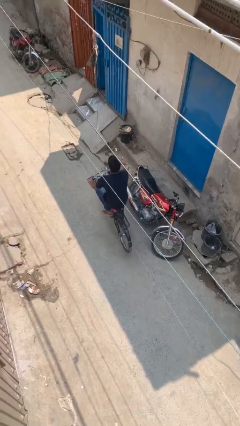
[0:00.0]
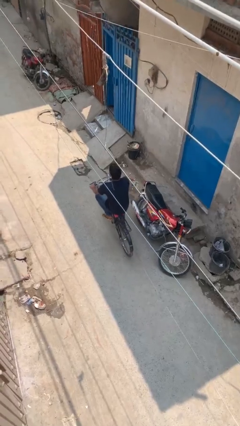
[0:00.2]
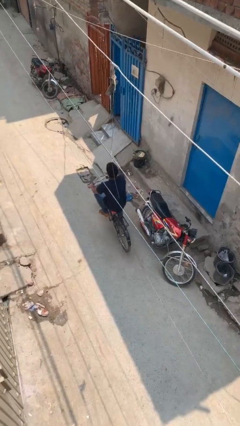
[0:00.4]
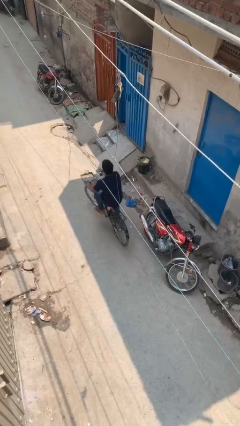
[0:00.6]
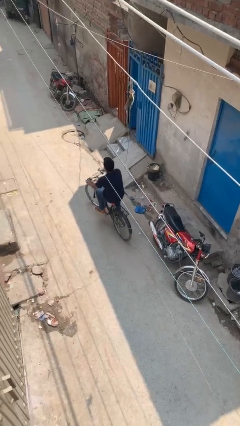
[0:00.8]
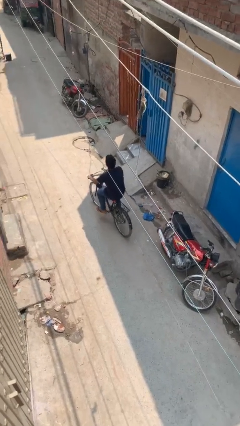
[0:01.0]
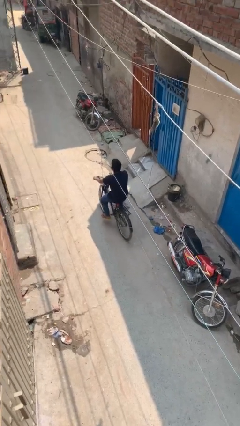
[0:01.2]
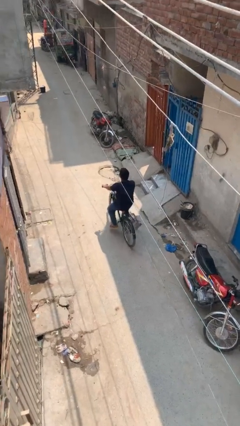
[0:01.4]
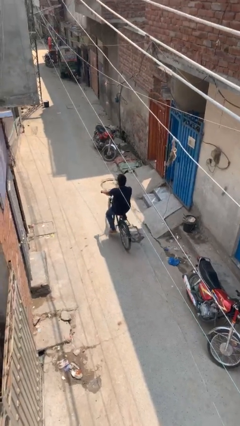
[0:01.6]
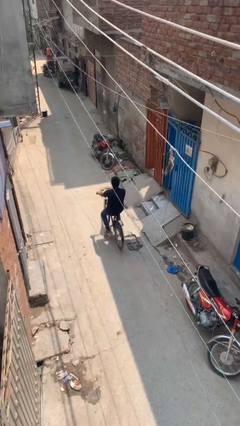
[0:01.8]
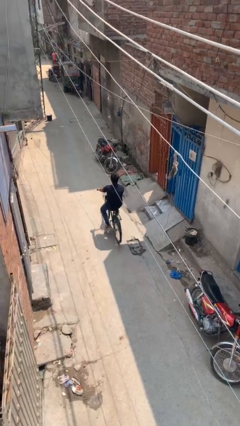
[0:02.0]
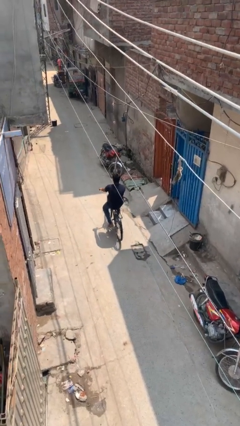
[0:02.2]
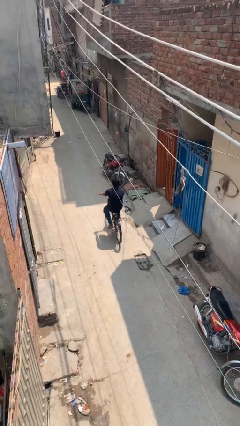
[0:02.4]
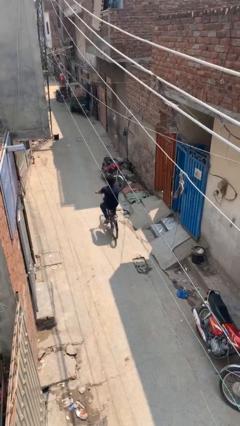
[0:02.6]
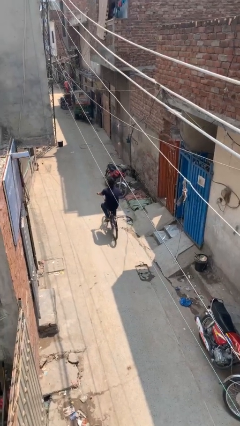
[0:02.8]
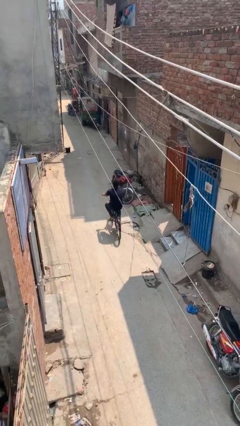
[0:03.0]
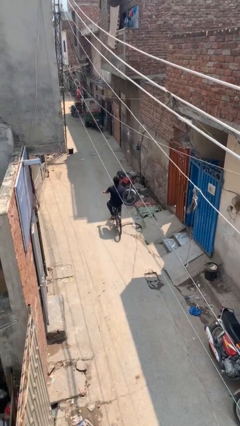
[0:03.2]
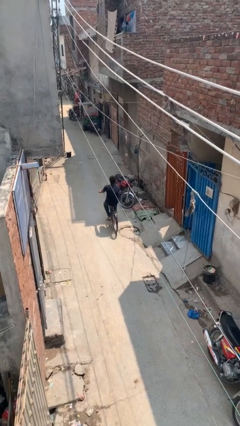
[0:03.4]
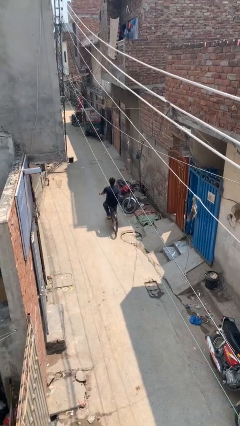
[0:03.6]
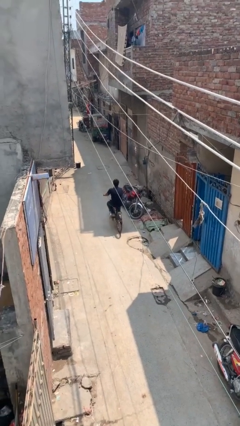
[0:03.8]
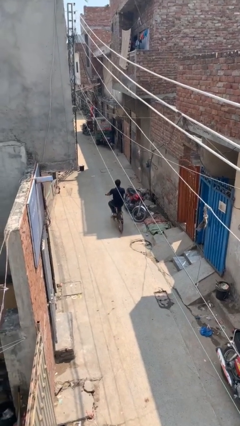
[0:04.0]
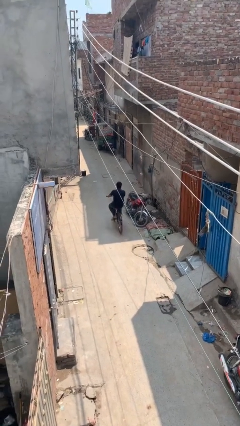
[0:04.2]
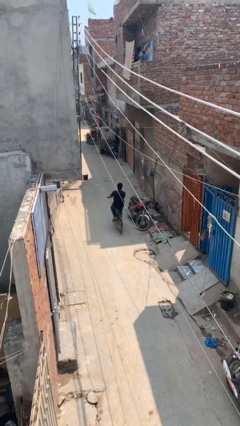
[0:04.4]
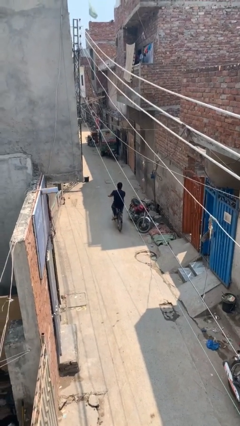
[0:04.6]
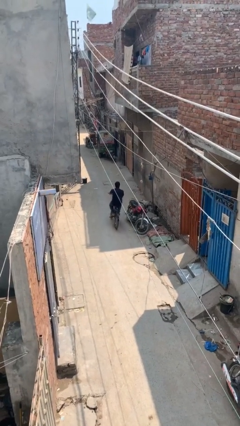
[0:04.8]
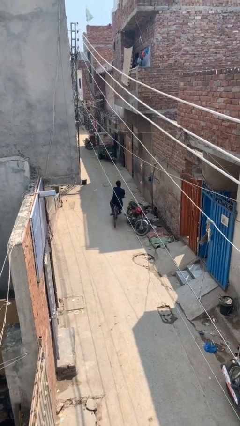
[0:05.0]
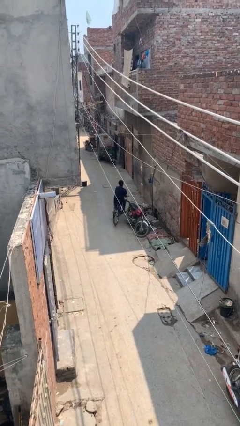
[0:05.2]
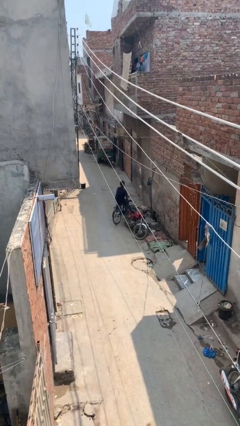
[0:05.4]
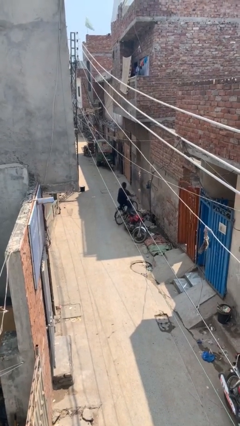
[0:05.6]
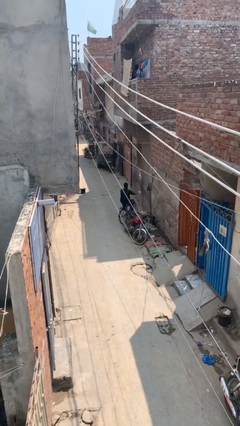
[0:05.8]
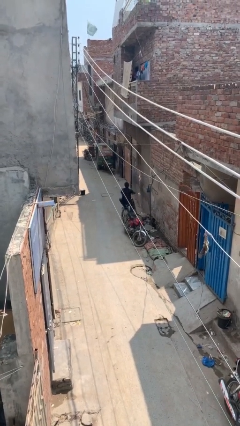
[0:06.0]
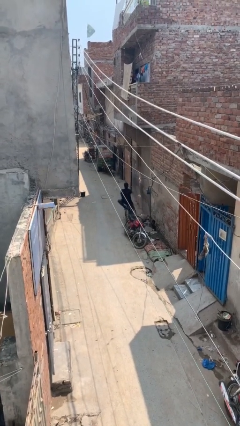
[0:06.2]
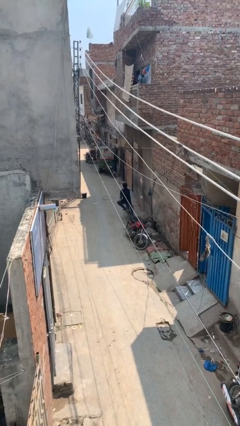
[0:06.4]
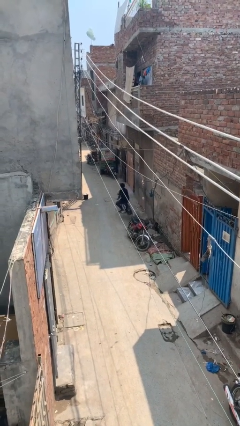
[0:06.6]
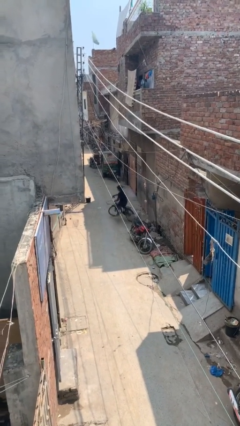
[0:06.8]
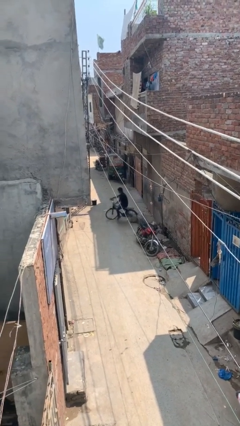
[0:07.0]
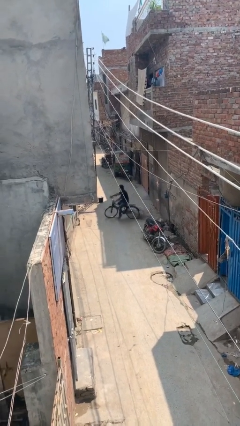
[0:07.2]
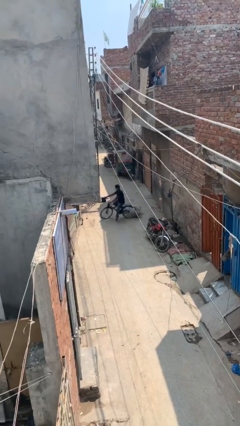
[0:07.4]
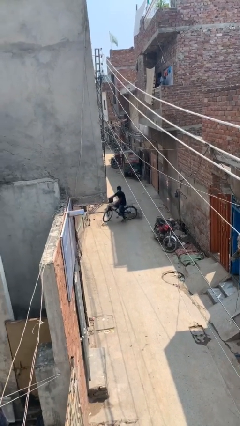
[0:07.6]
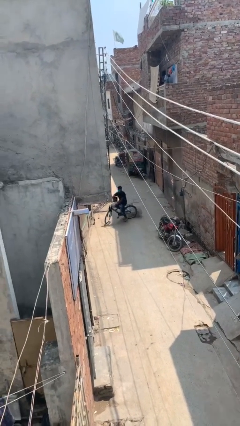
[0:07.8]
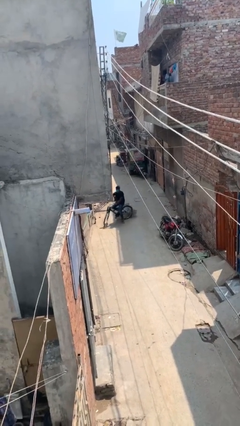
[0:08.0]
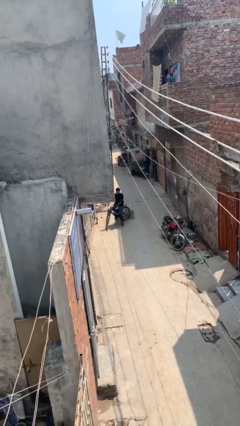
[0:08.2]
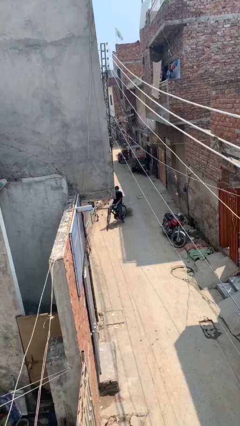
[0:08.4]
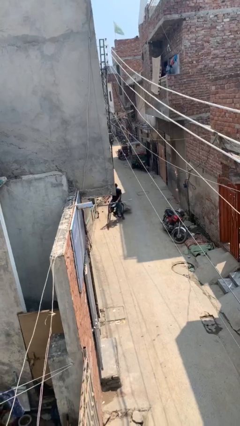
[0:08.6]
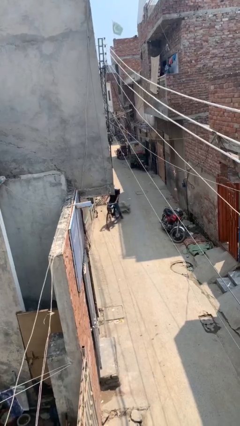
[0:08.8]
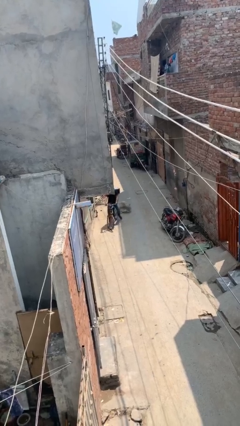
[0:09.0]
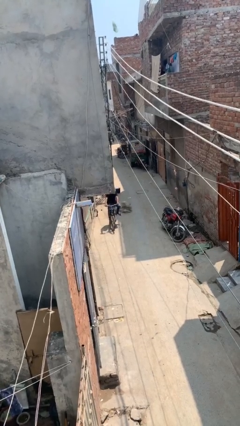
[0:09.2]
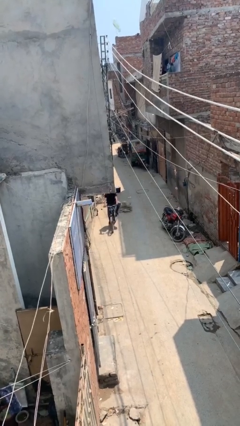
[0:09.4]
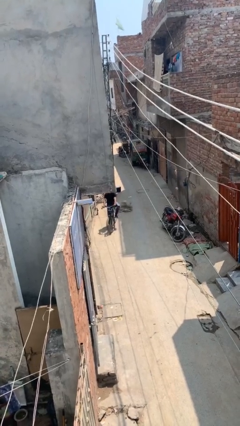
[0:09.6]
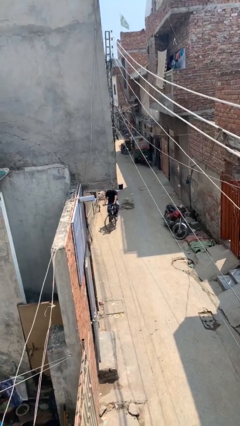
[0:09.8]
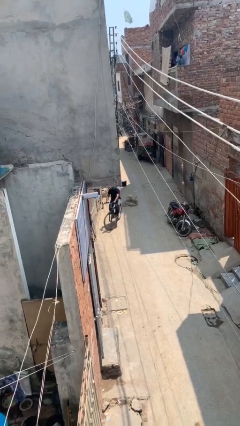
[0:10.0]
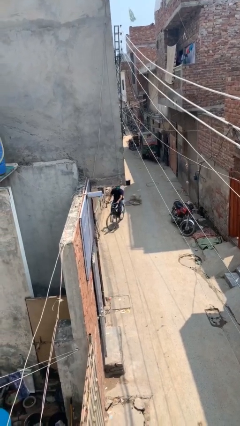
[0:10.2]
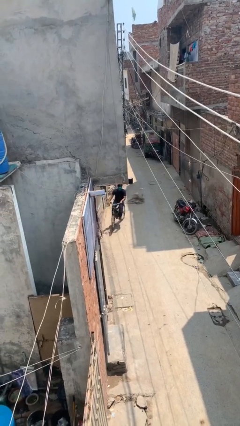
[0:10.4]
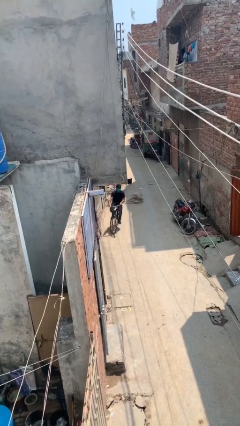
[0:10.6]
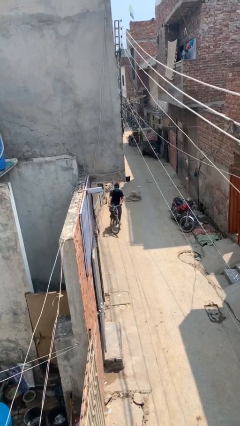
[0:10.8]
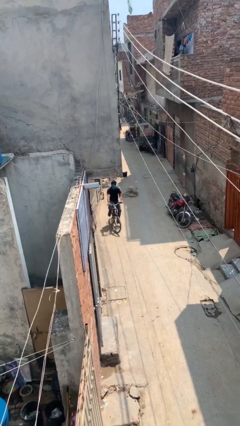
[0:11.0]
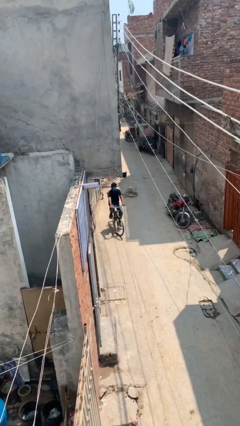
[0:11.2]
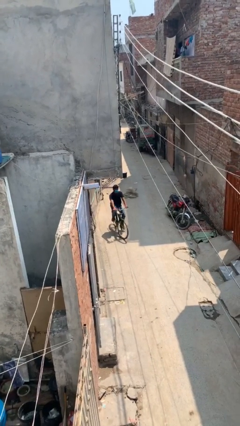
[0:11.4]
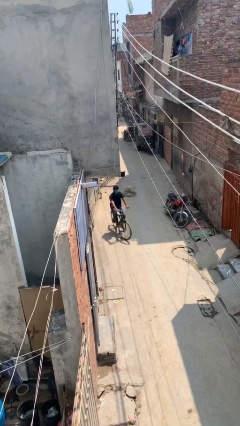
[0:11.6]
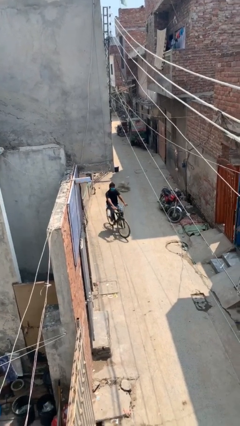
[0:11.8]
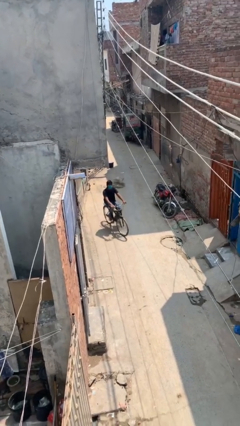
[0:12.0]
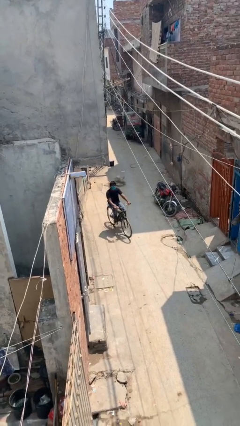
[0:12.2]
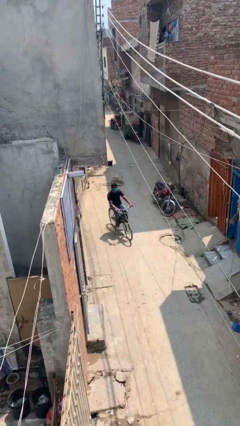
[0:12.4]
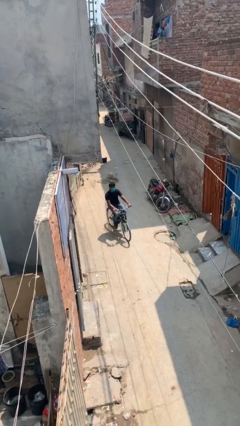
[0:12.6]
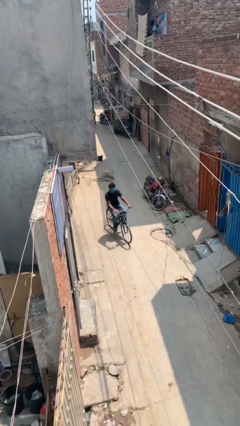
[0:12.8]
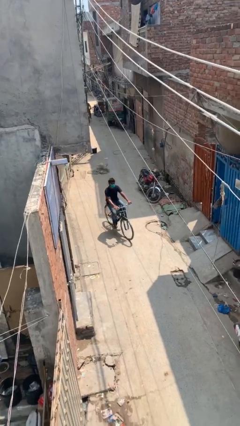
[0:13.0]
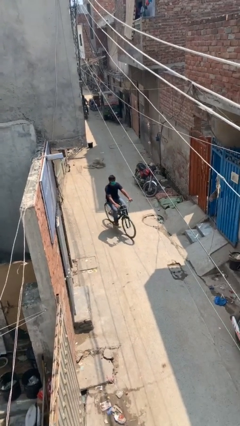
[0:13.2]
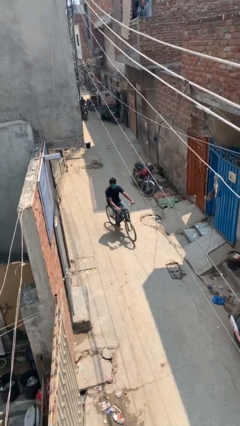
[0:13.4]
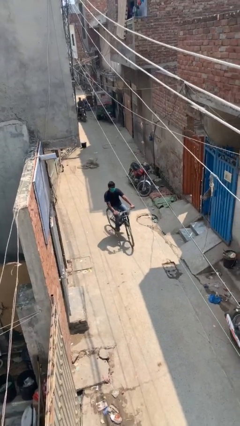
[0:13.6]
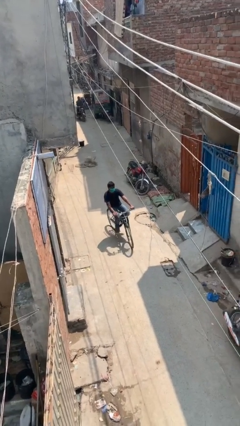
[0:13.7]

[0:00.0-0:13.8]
person rides bicycle

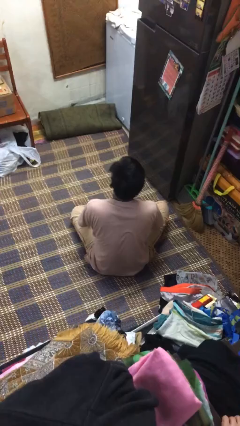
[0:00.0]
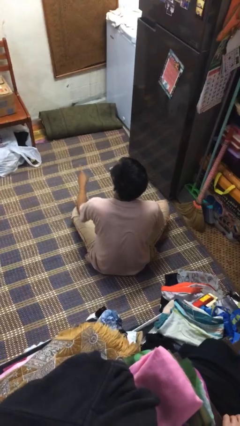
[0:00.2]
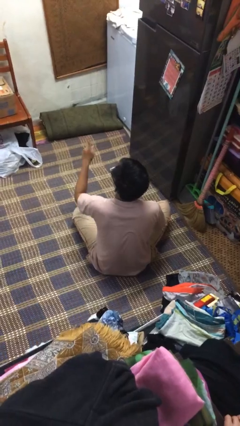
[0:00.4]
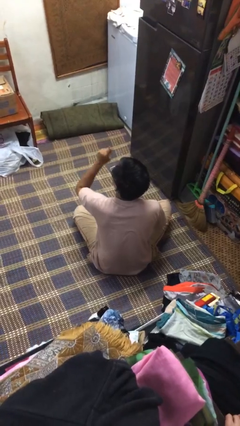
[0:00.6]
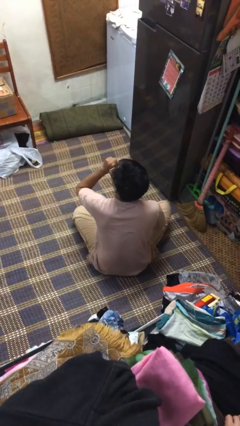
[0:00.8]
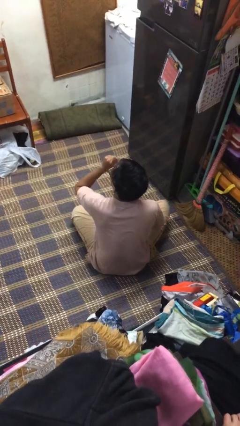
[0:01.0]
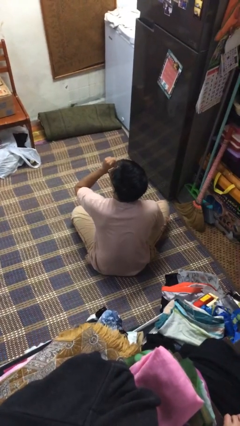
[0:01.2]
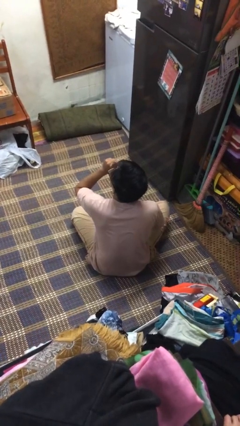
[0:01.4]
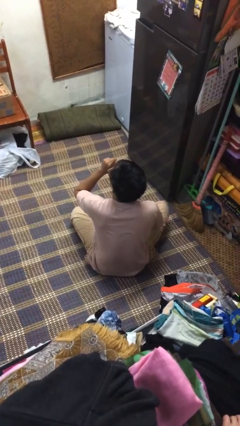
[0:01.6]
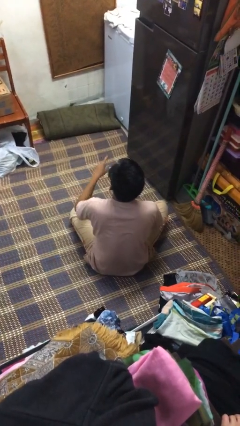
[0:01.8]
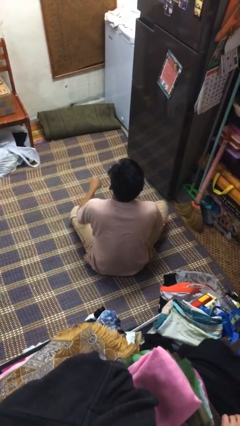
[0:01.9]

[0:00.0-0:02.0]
person gestures be quiet

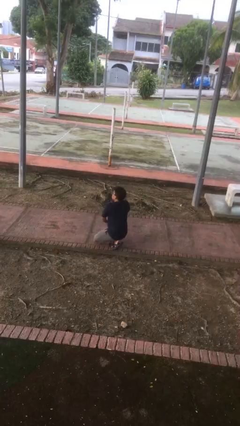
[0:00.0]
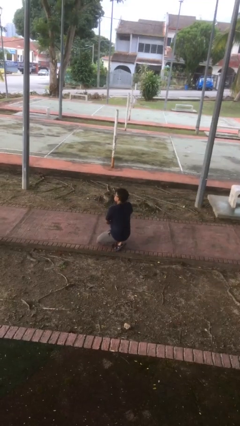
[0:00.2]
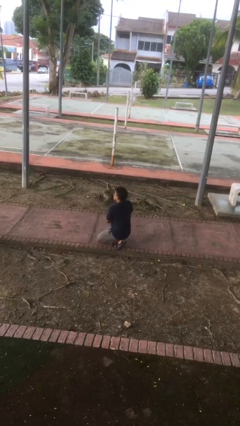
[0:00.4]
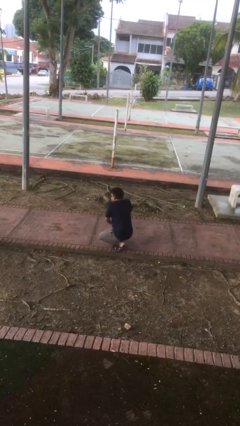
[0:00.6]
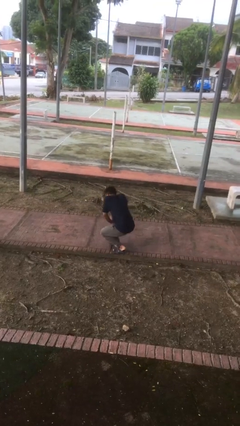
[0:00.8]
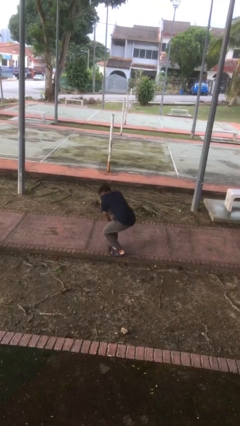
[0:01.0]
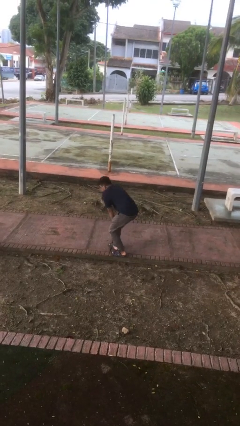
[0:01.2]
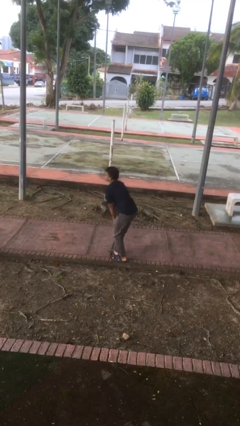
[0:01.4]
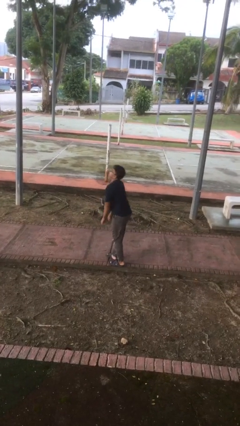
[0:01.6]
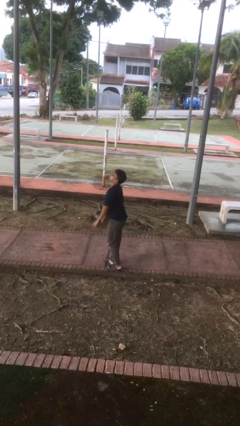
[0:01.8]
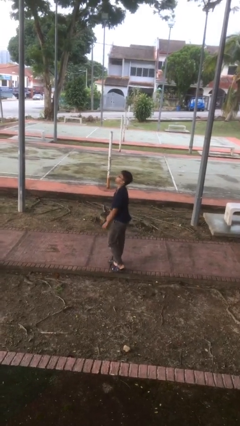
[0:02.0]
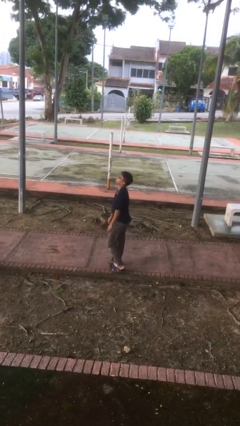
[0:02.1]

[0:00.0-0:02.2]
person stands up from floor
